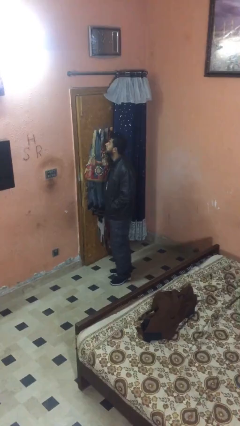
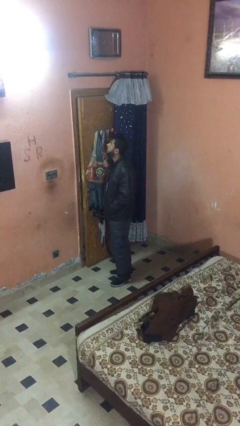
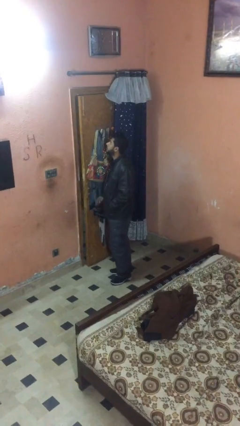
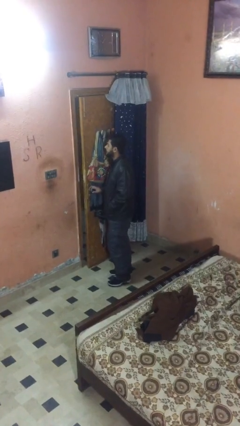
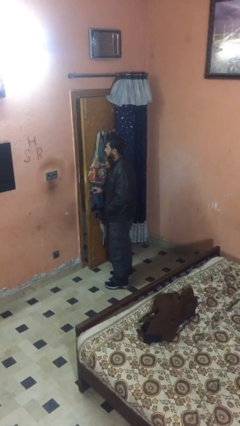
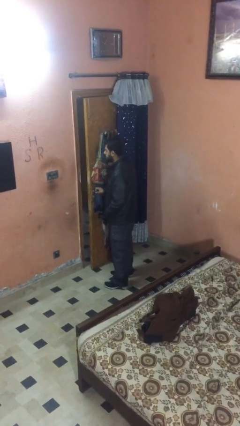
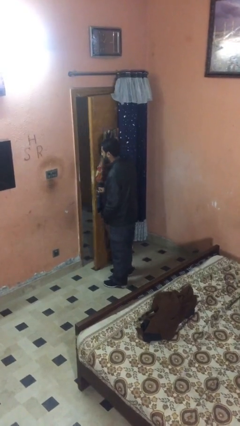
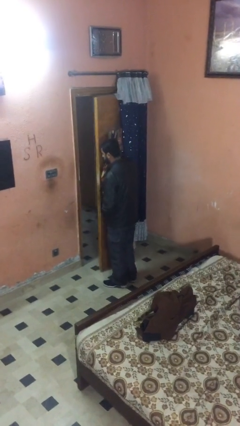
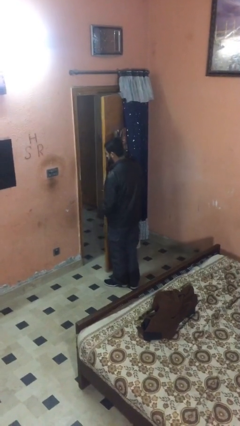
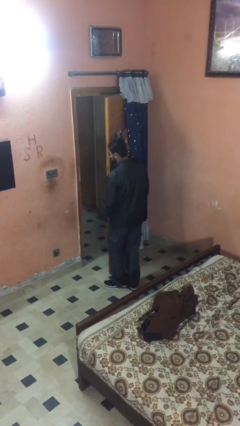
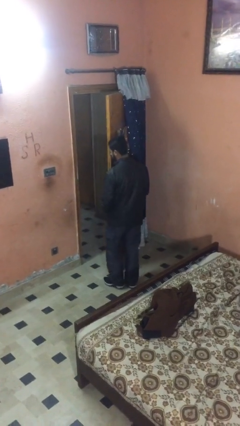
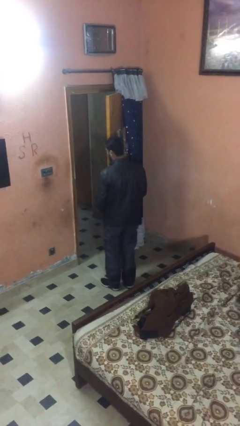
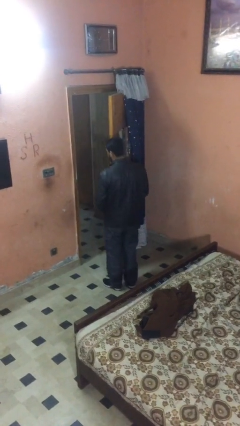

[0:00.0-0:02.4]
person opens facility door

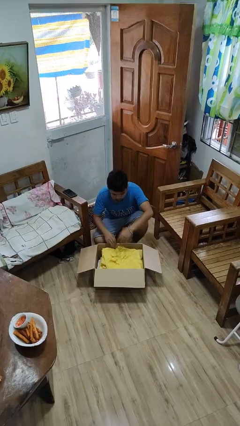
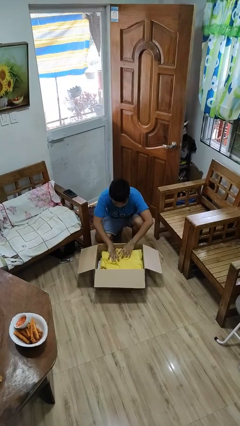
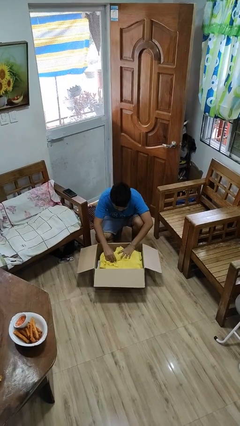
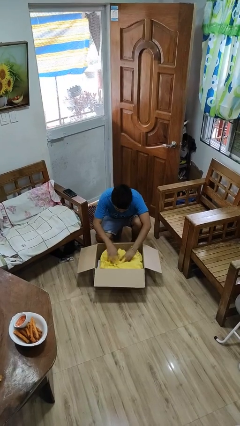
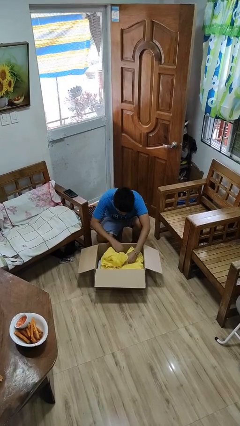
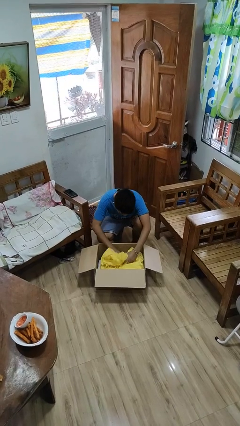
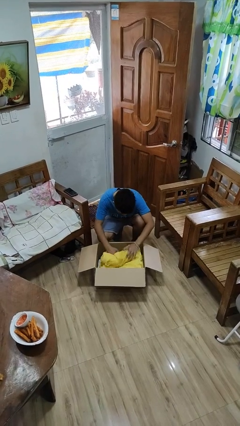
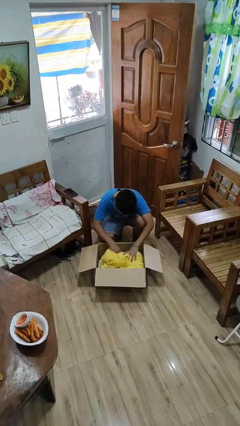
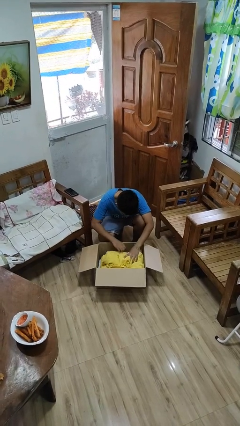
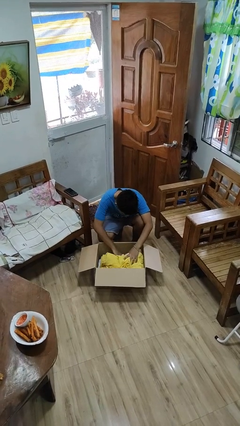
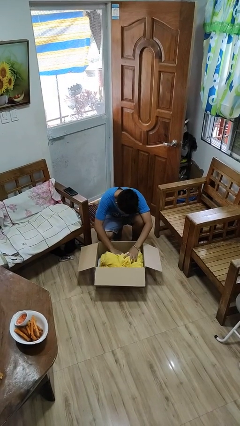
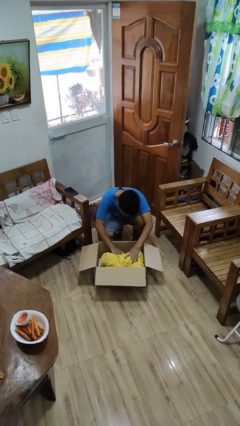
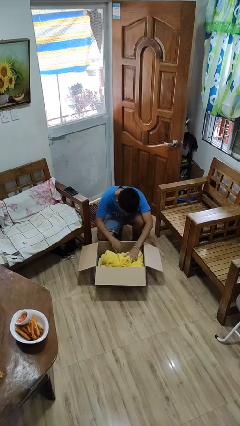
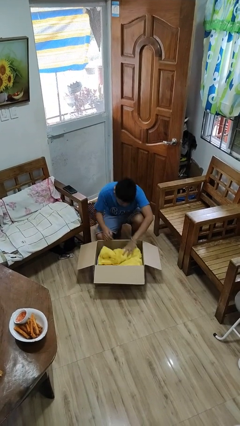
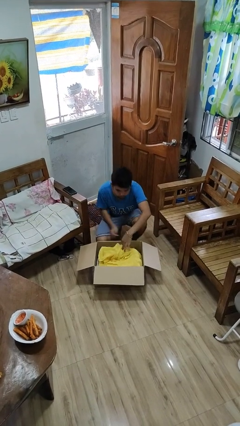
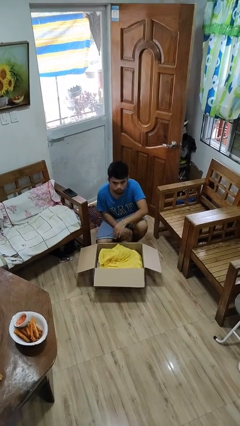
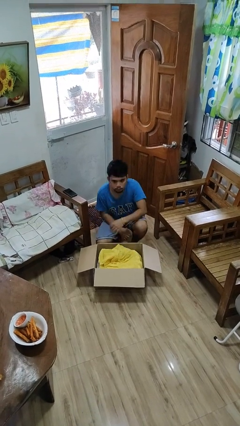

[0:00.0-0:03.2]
person searches in box

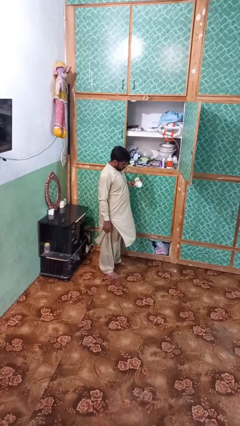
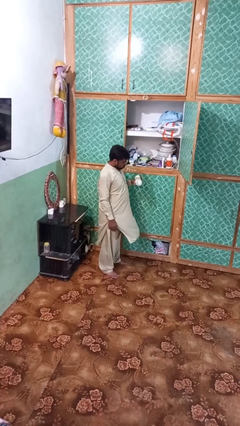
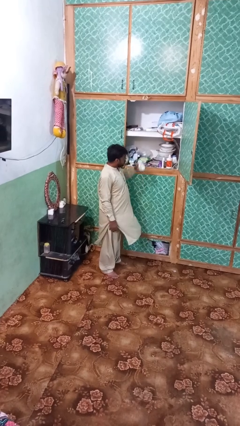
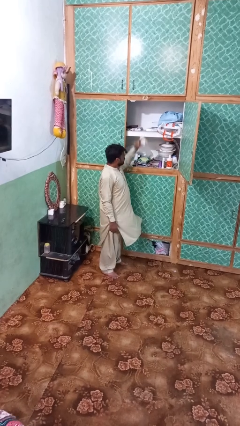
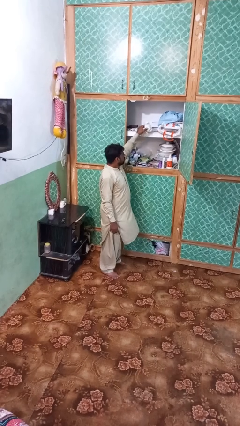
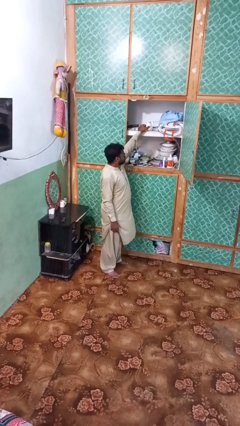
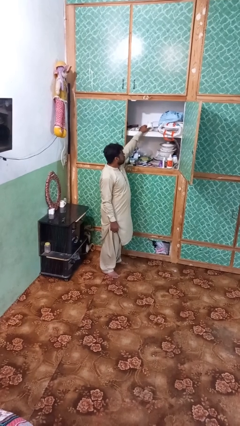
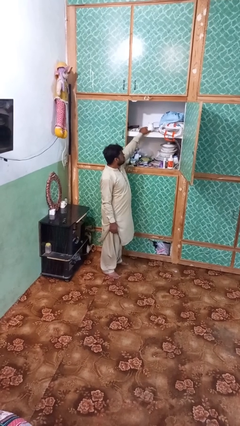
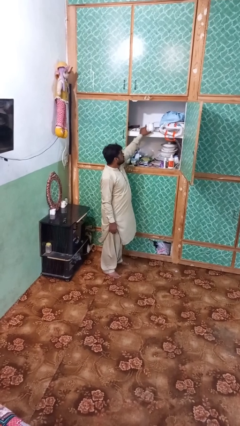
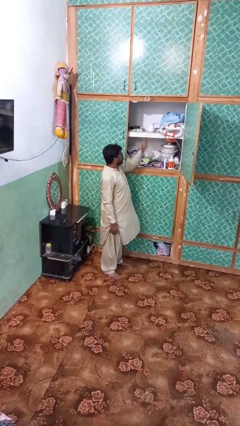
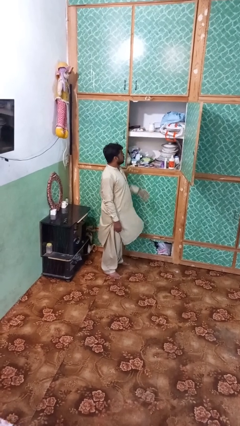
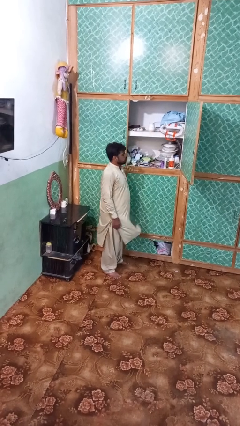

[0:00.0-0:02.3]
person puts down object on shelf

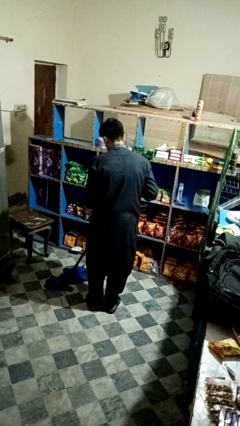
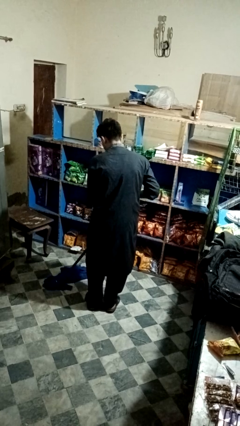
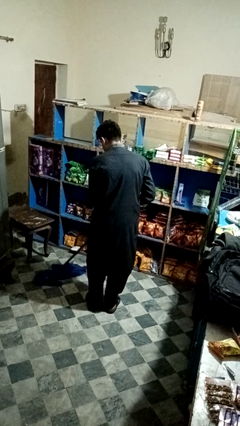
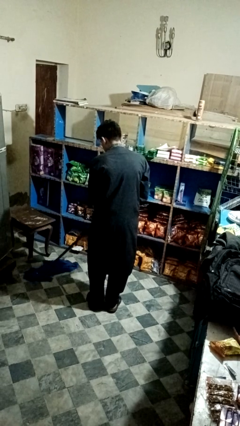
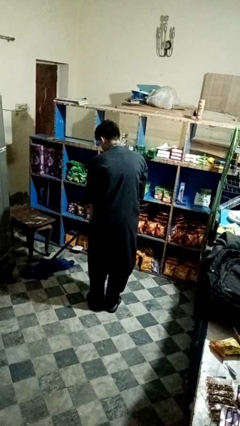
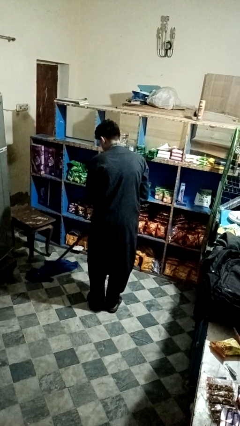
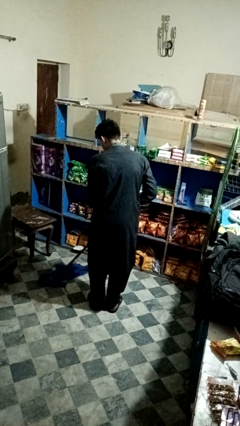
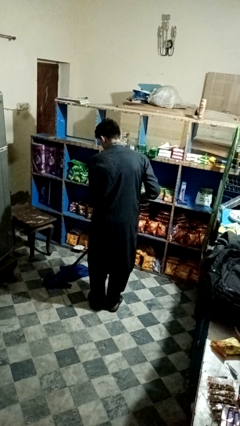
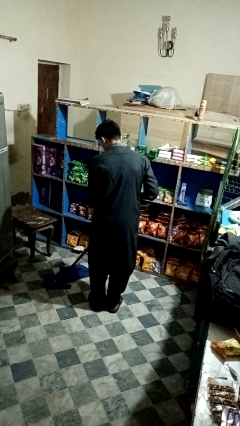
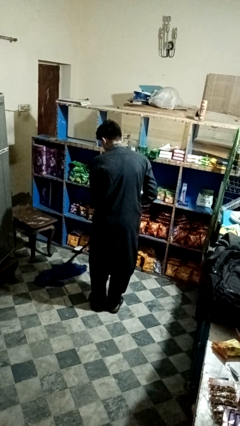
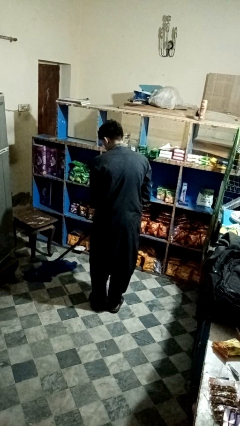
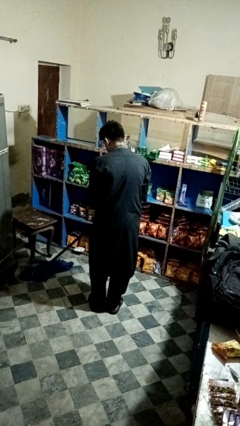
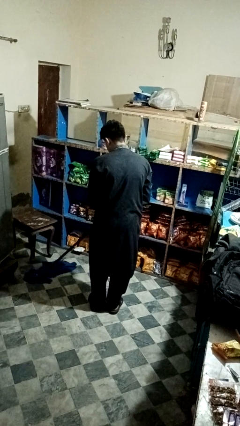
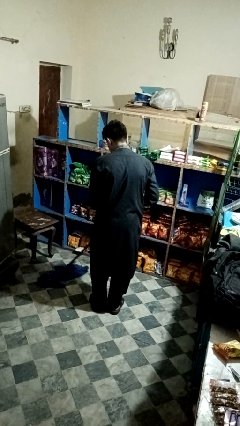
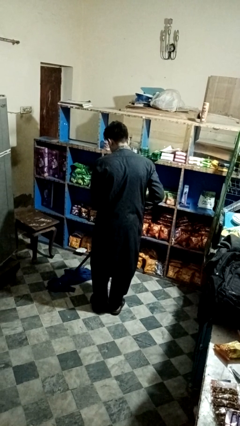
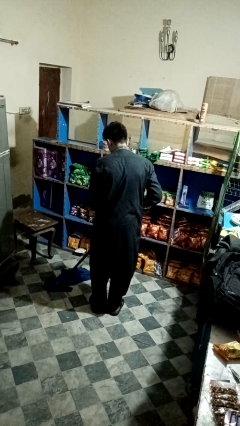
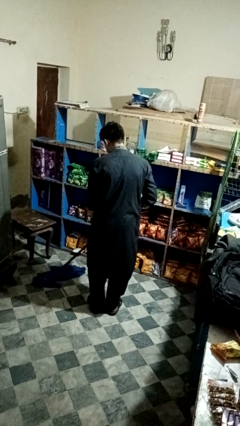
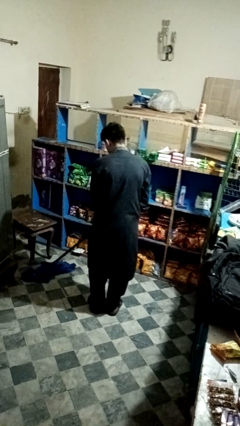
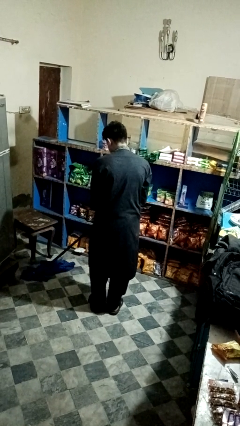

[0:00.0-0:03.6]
person mops

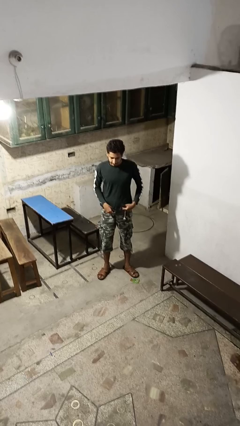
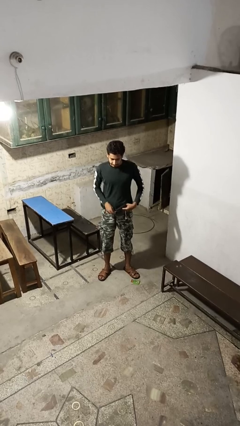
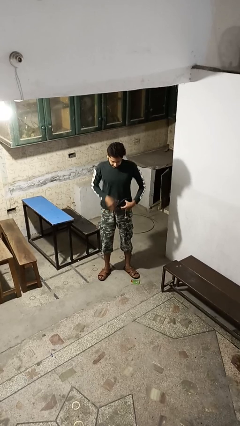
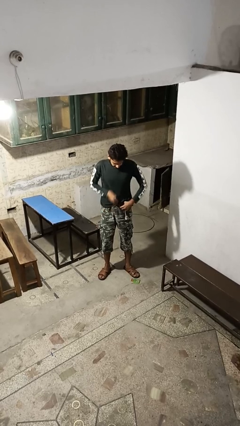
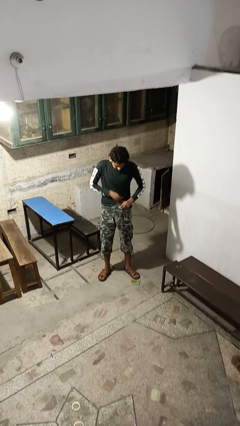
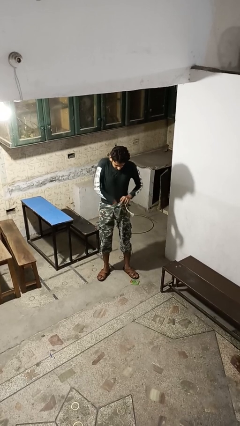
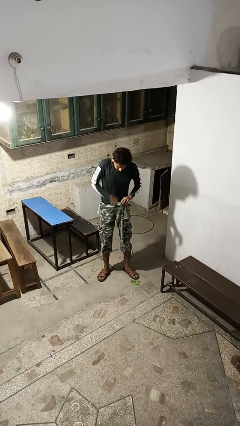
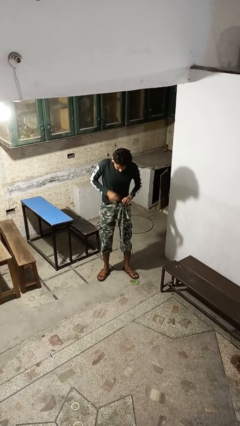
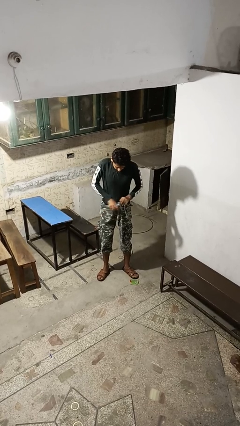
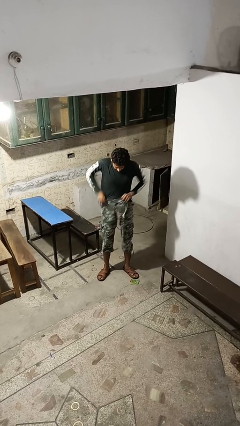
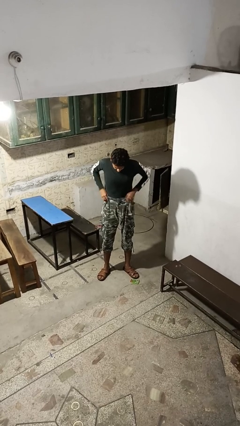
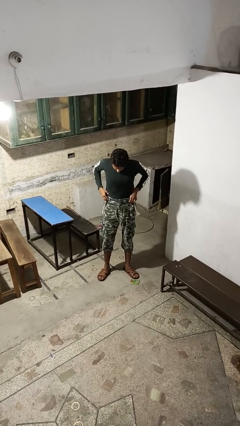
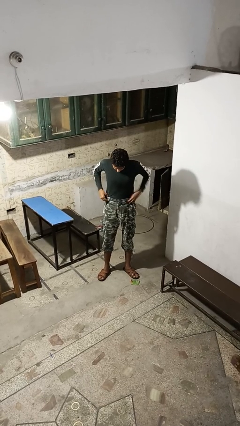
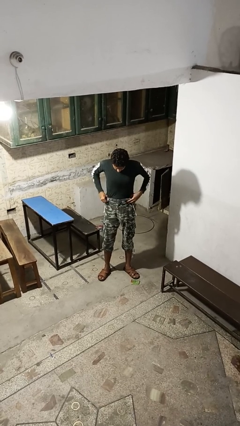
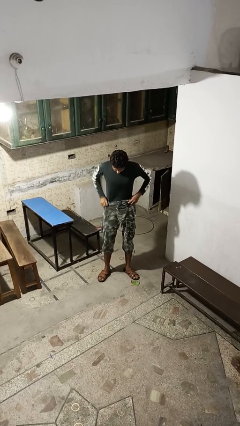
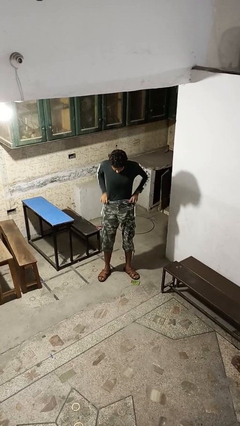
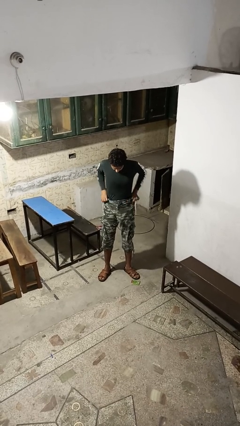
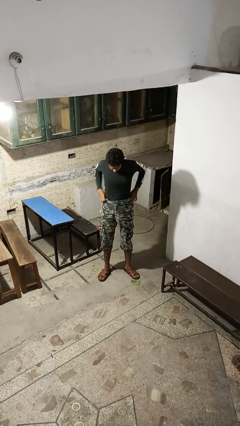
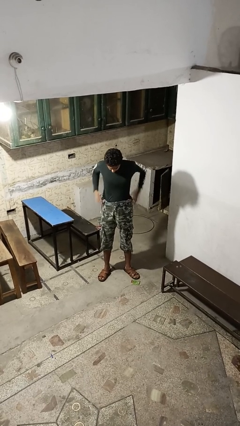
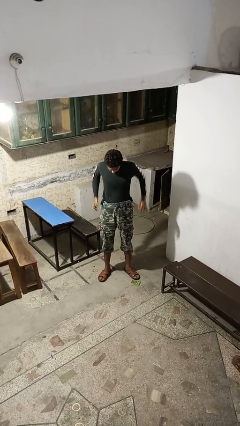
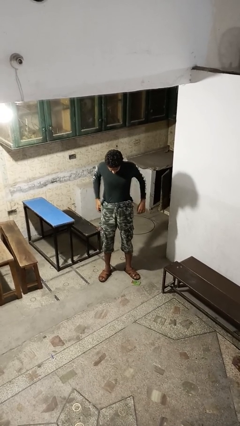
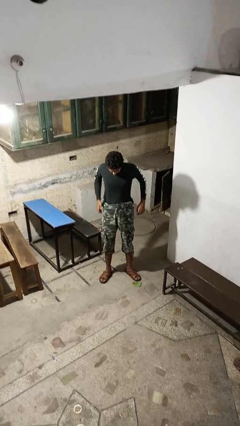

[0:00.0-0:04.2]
person tucks in shirt

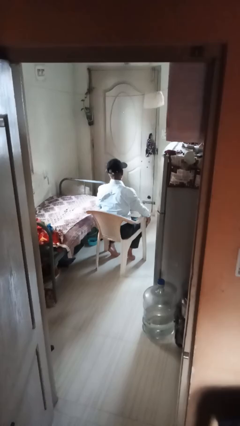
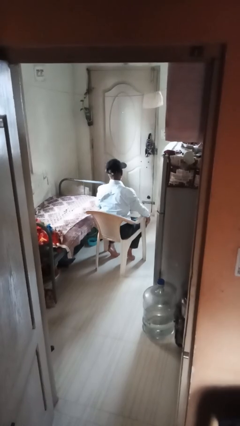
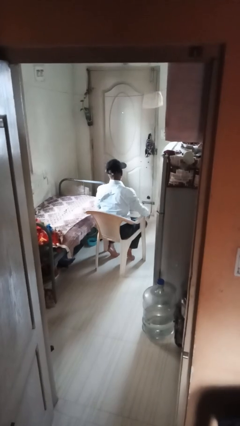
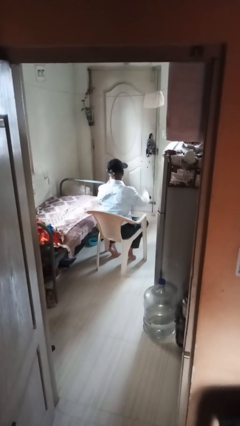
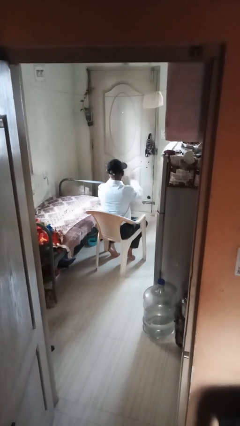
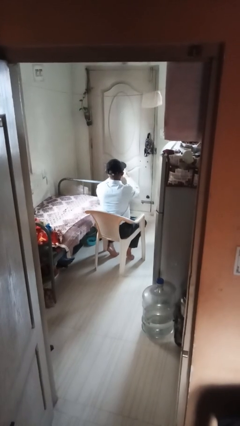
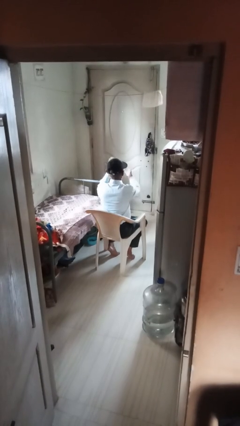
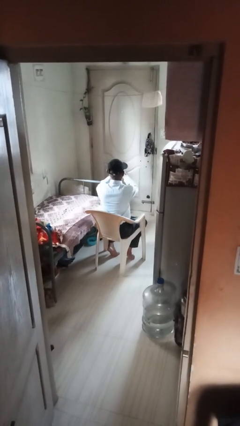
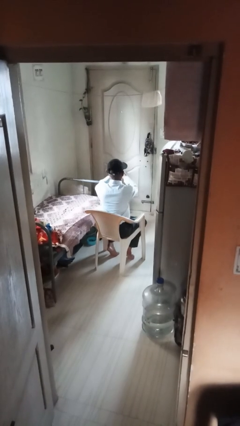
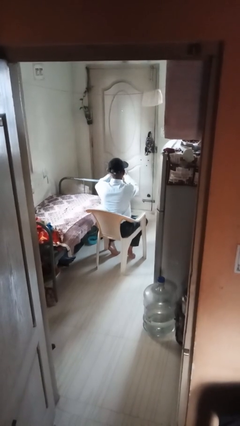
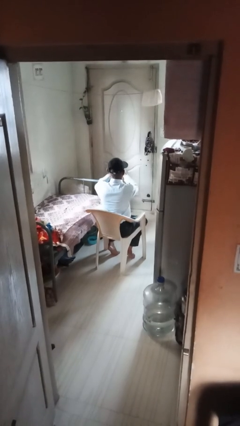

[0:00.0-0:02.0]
person claps hands
